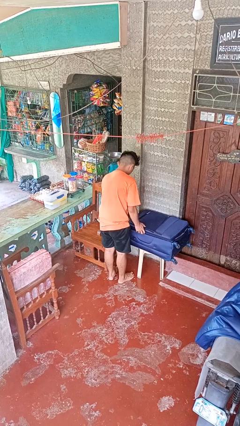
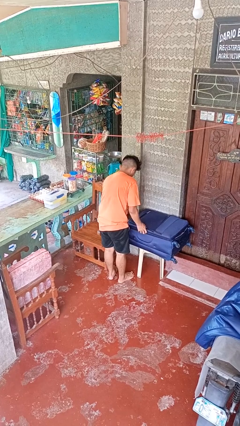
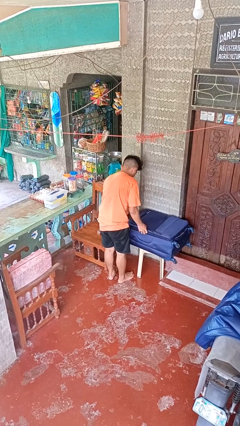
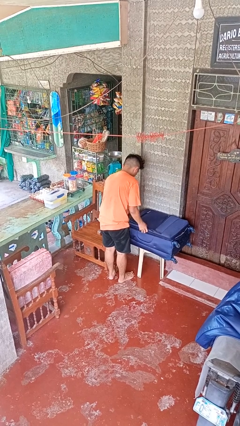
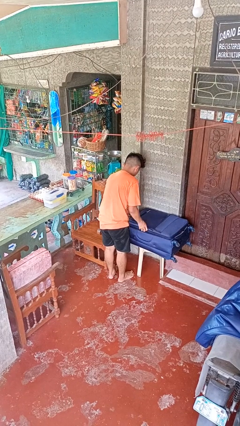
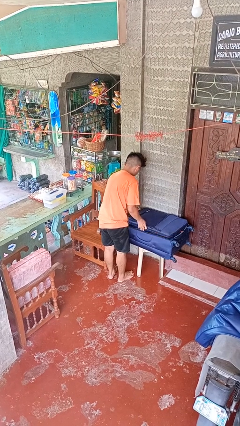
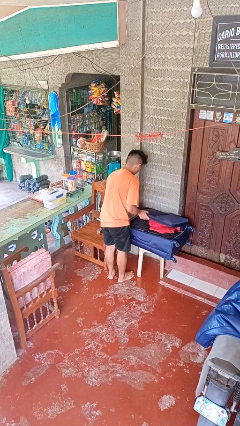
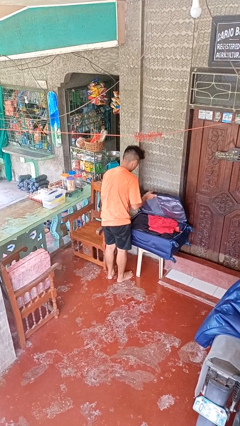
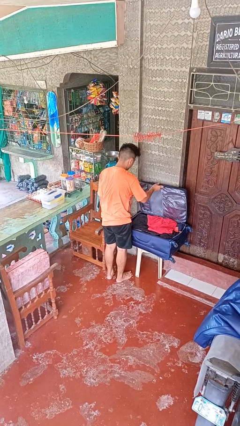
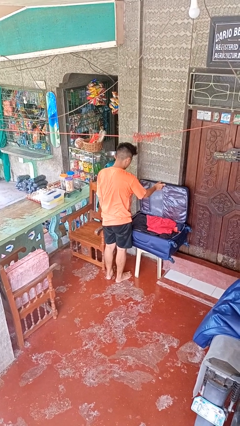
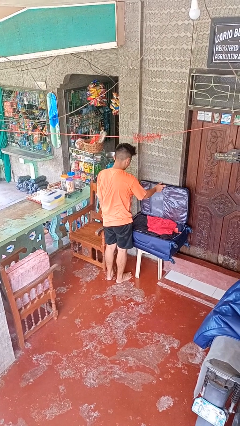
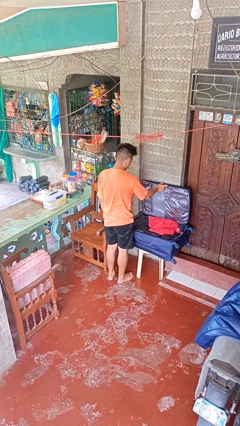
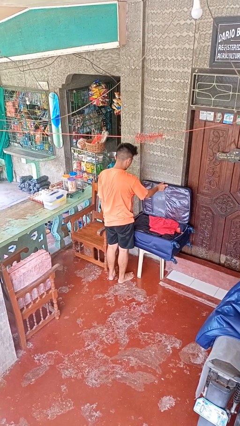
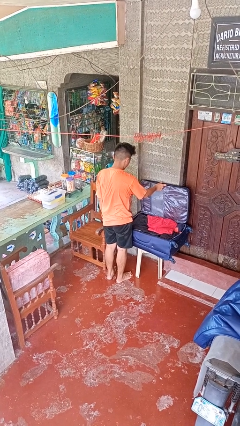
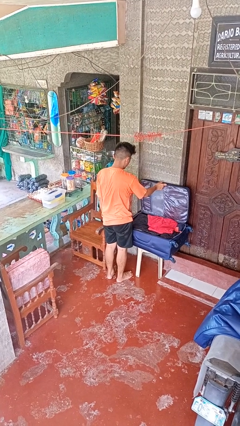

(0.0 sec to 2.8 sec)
person opens suitcase

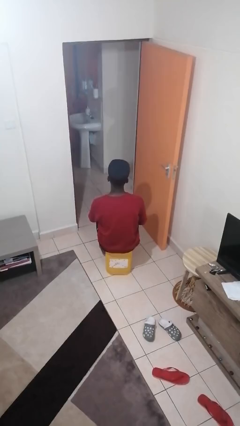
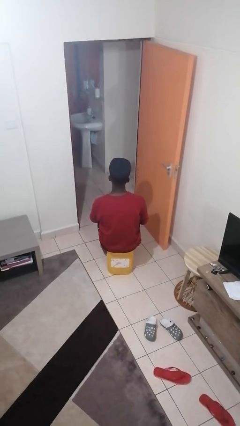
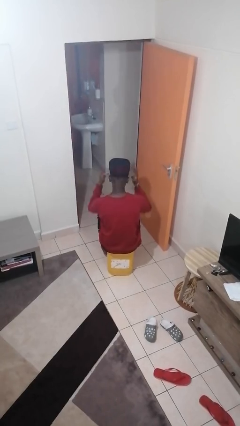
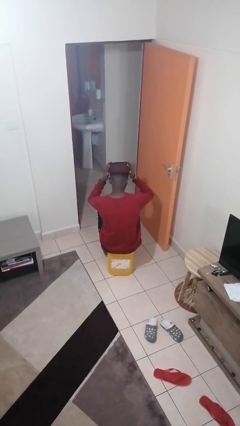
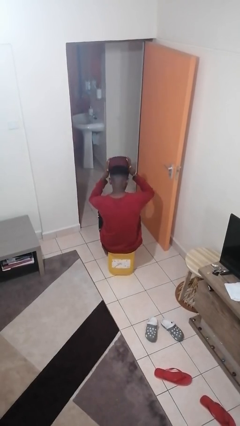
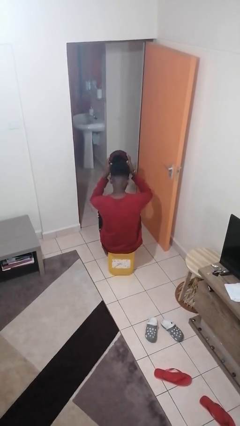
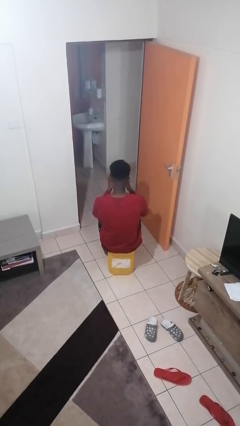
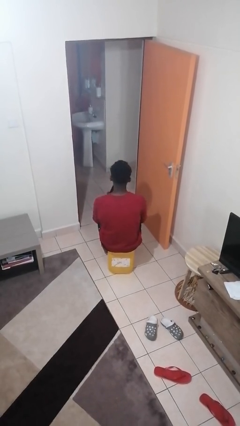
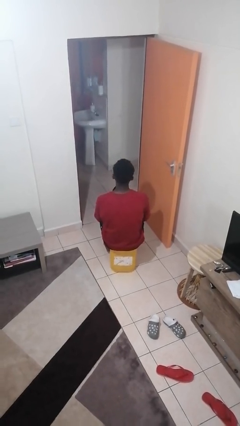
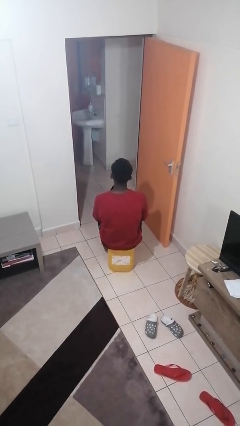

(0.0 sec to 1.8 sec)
person takes off hat

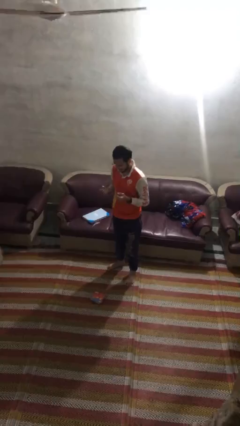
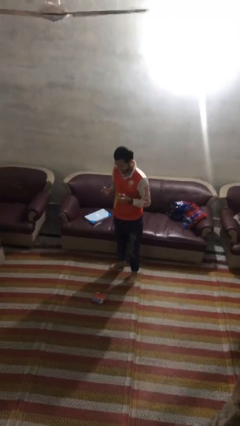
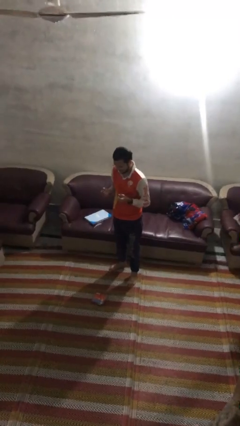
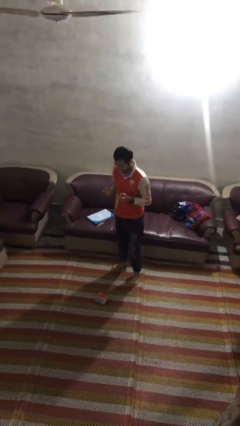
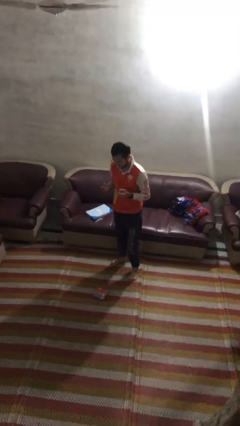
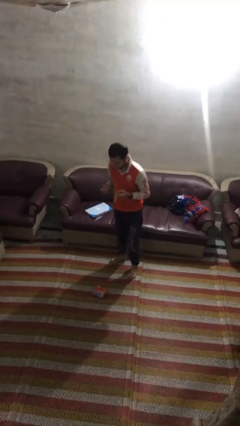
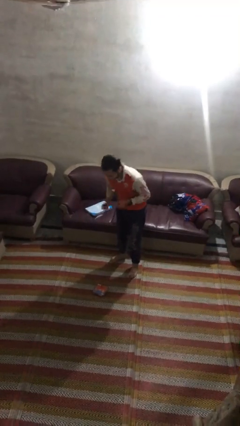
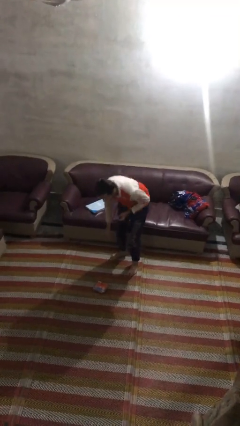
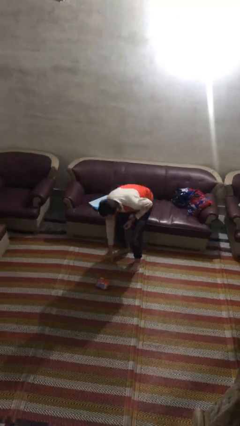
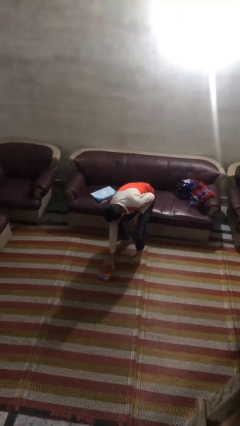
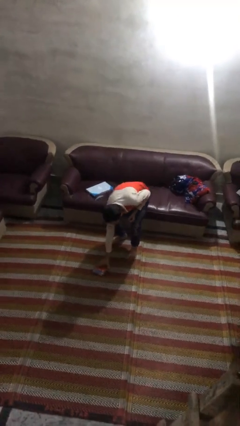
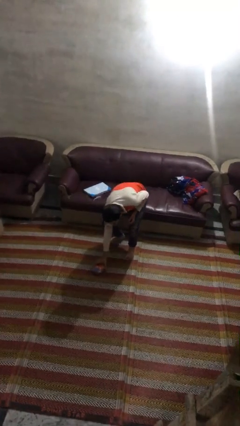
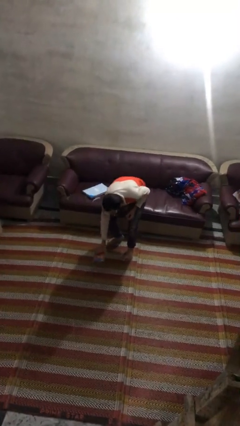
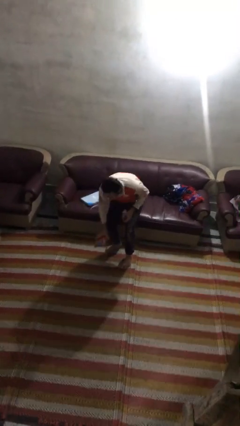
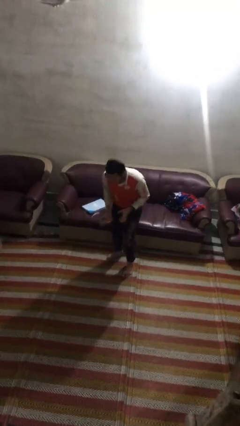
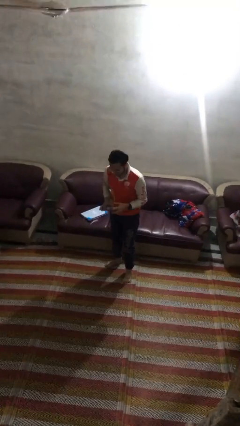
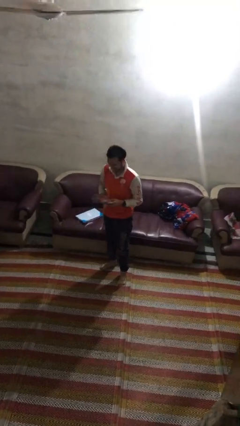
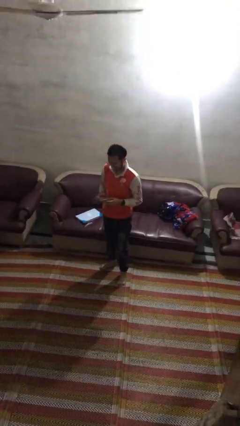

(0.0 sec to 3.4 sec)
person picks up object from floor

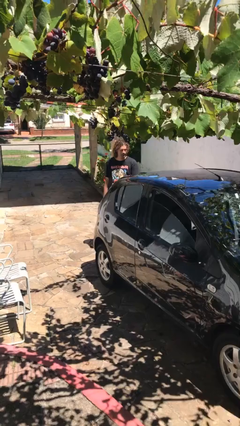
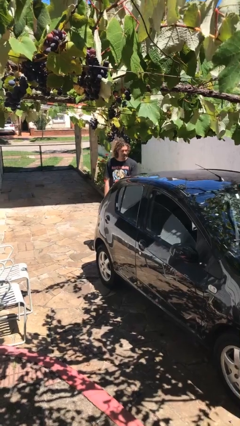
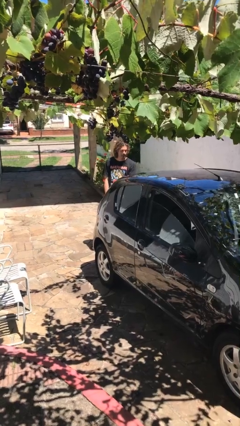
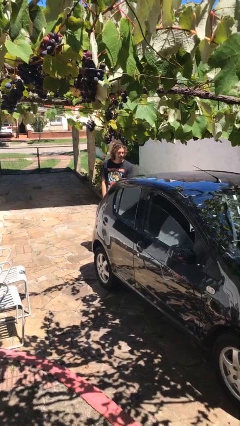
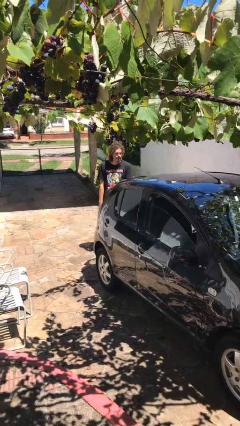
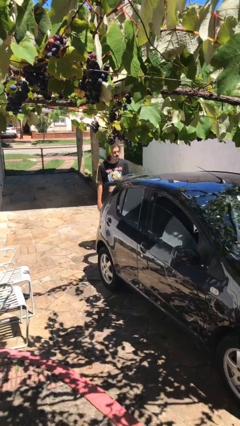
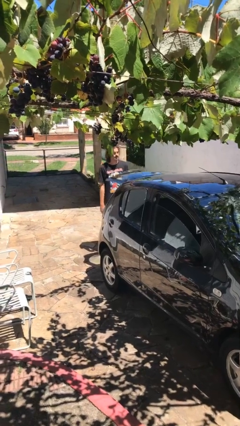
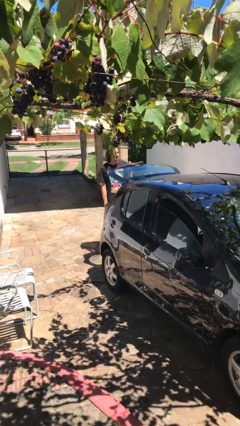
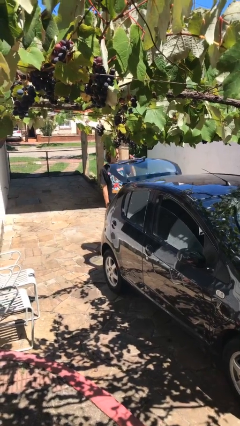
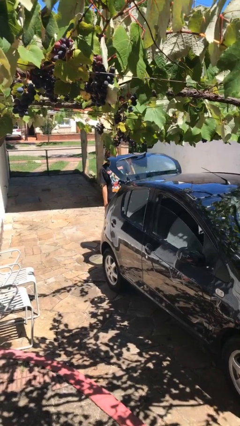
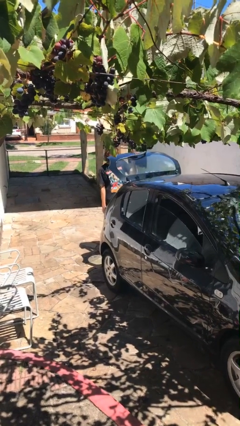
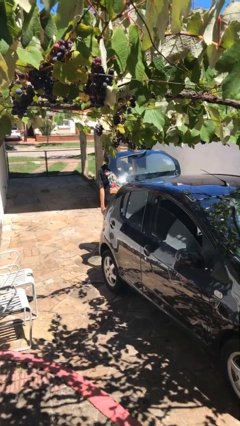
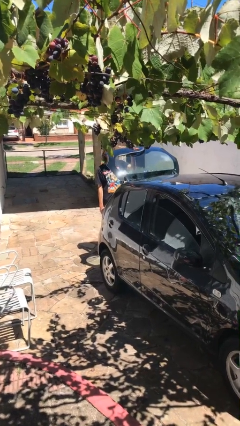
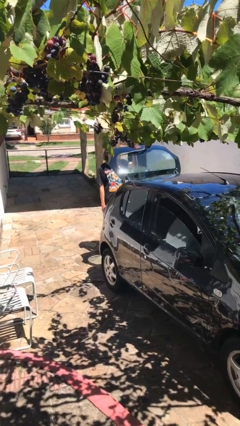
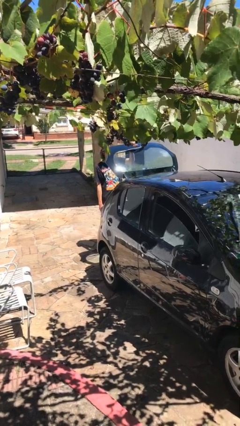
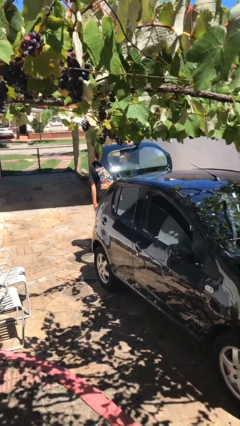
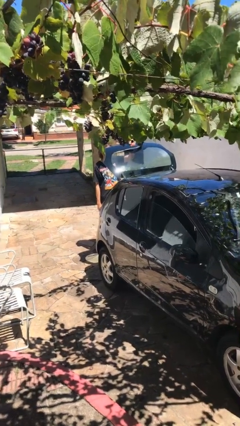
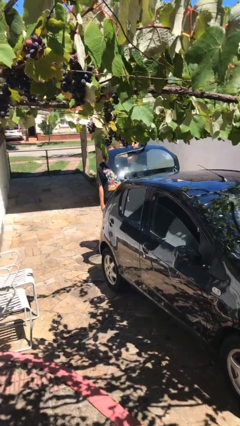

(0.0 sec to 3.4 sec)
person opens car trunk

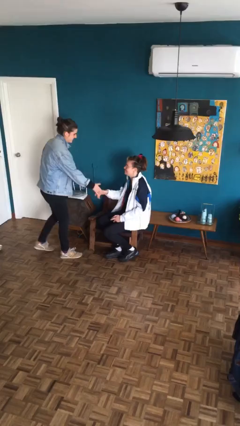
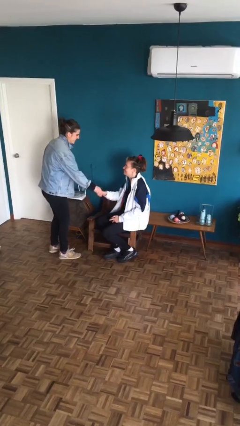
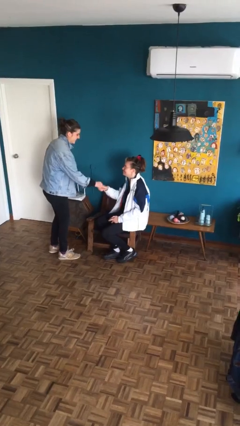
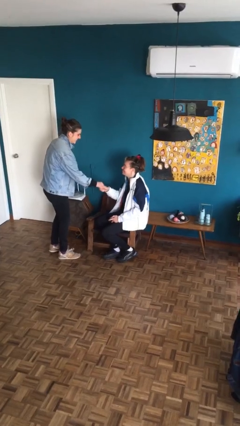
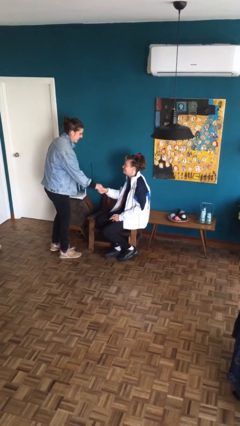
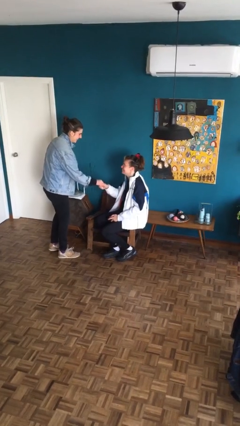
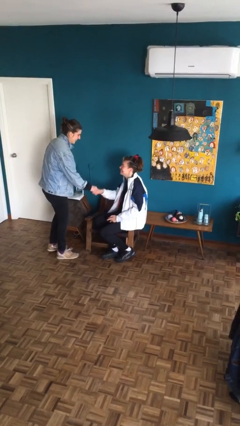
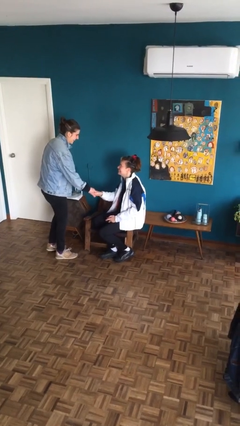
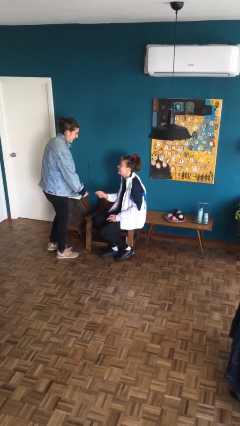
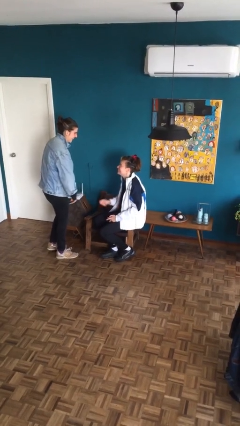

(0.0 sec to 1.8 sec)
person shakes hand

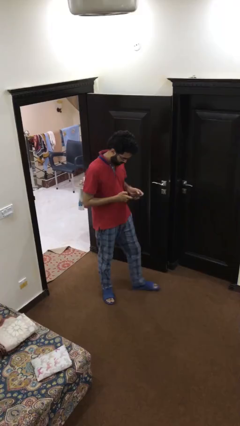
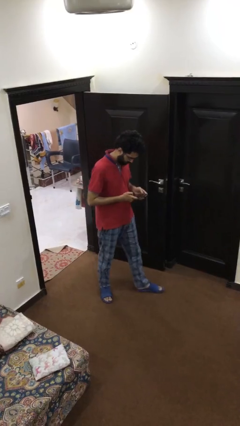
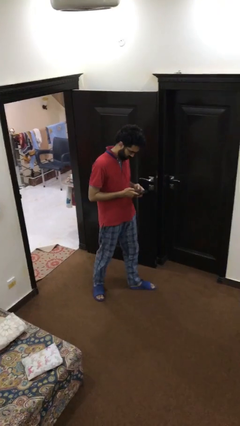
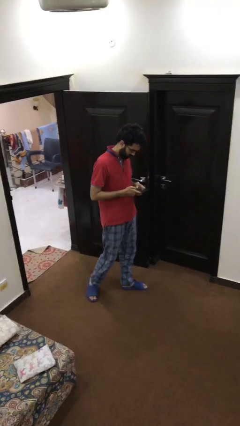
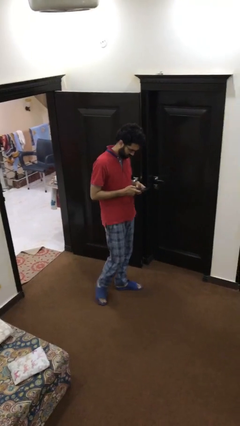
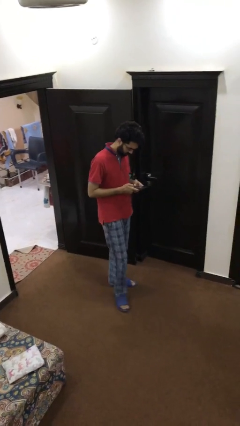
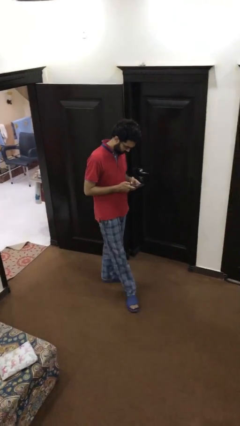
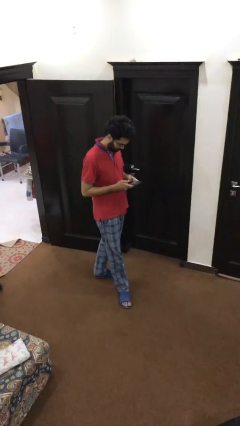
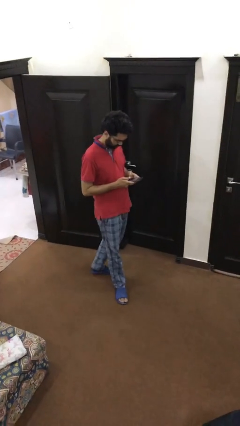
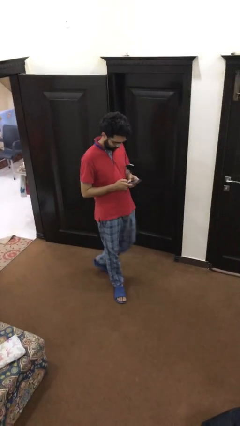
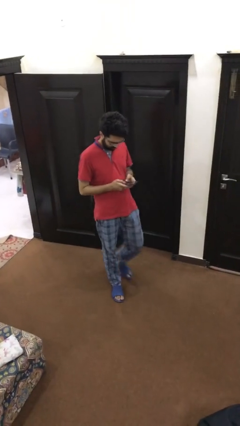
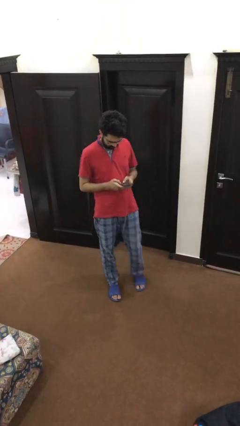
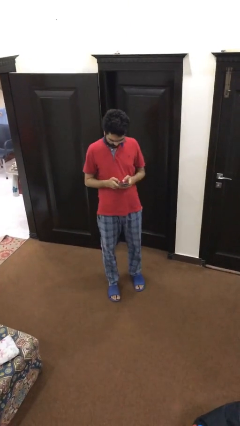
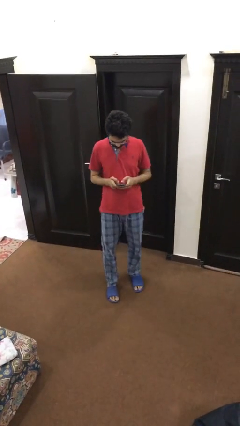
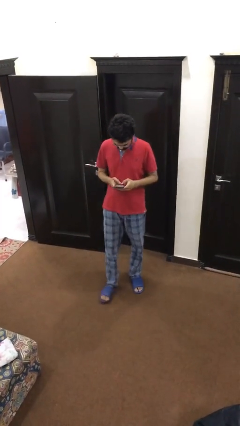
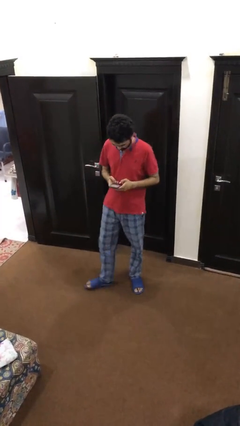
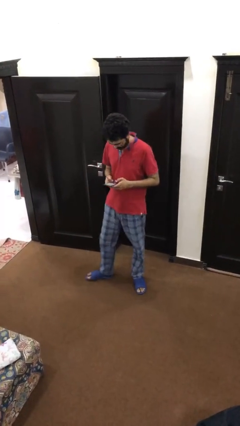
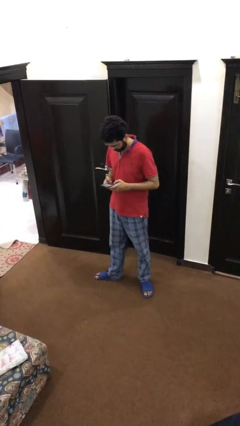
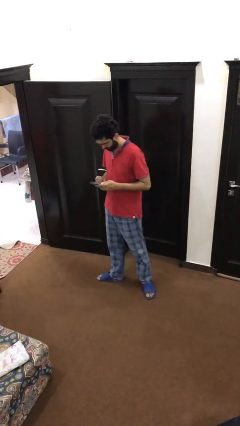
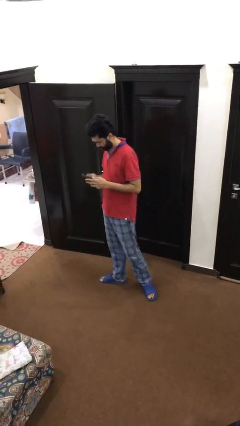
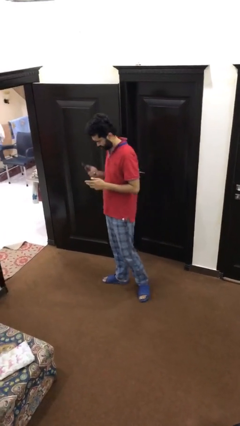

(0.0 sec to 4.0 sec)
person texts on phone

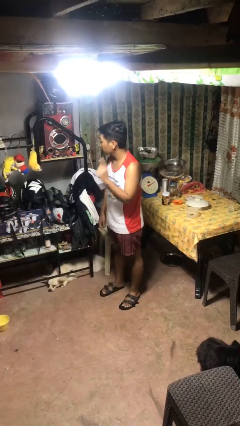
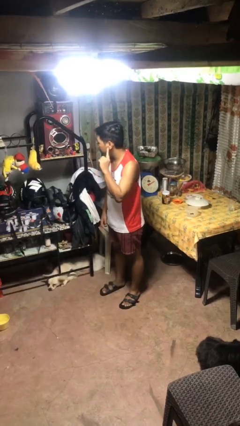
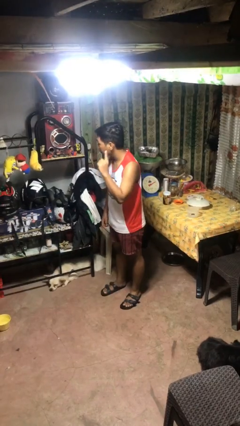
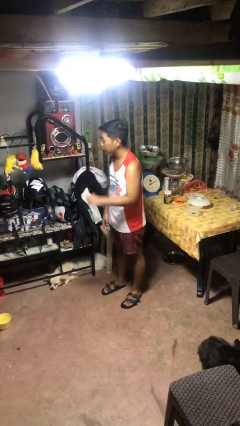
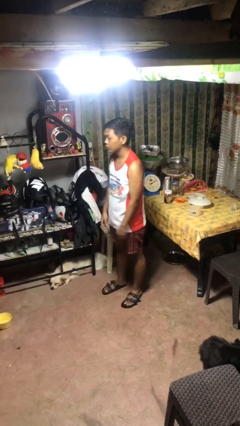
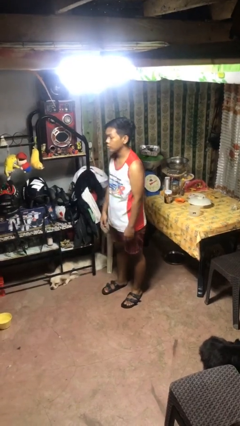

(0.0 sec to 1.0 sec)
person gestures listen closely
